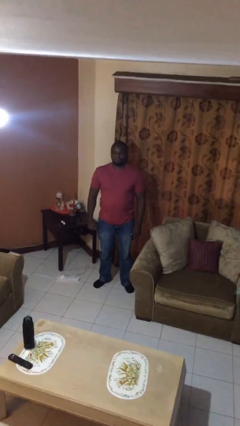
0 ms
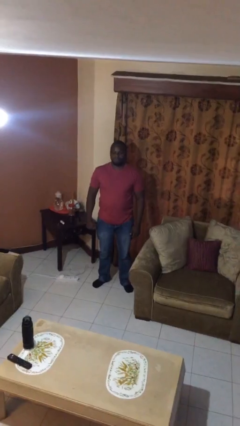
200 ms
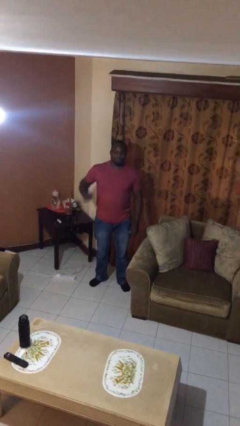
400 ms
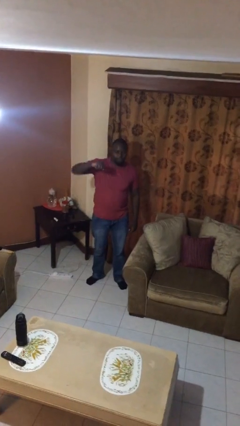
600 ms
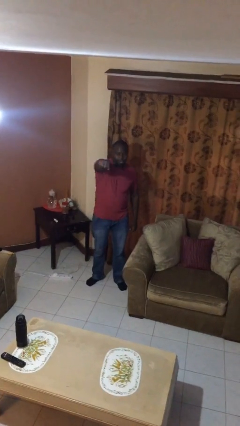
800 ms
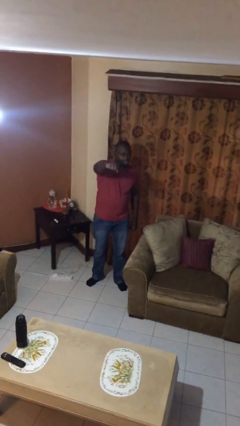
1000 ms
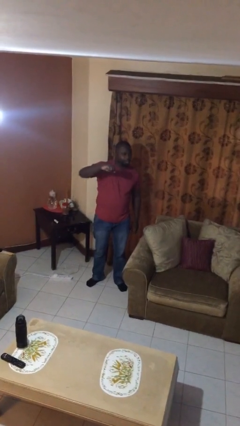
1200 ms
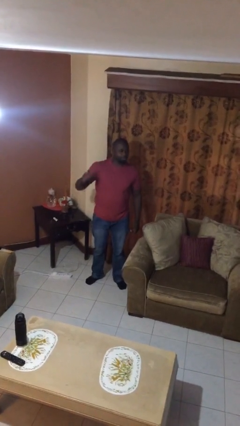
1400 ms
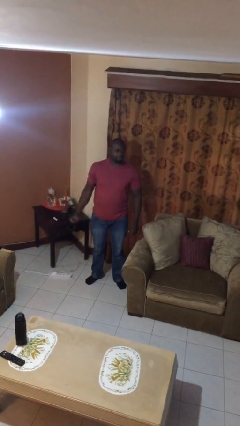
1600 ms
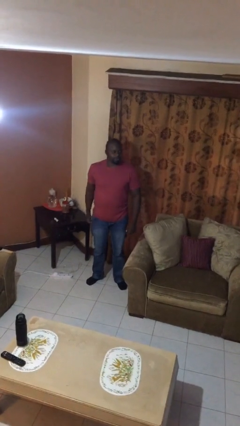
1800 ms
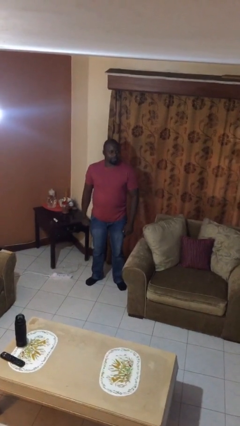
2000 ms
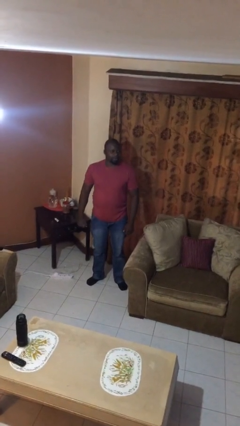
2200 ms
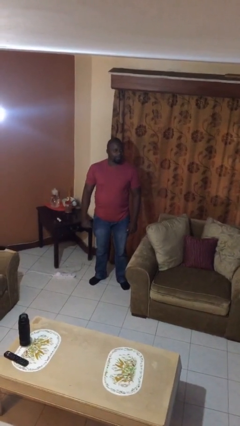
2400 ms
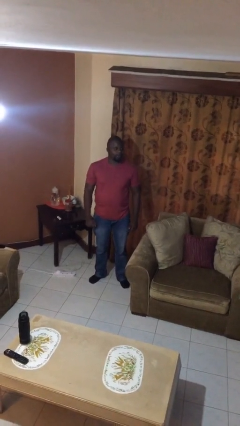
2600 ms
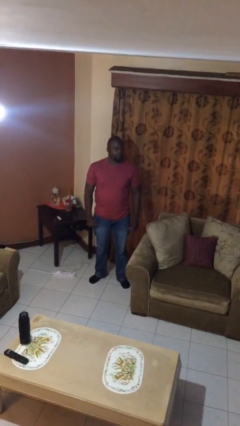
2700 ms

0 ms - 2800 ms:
person punches

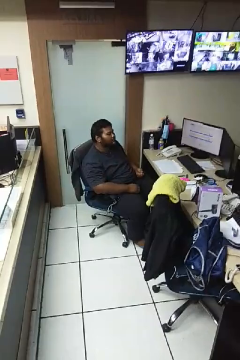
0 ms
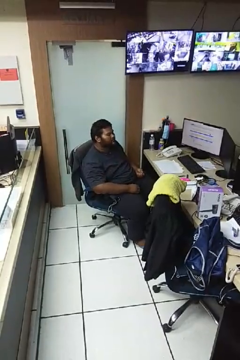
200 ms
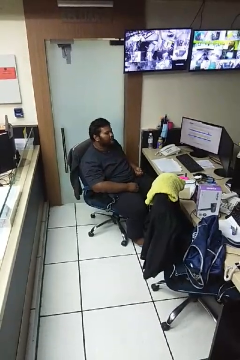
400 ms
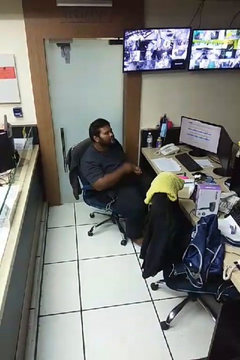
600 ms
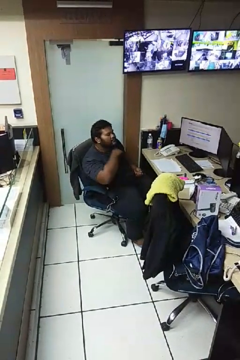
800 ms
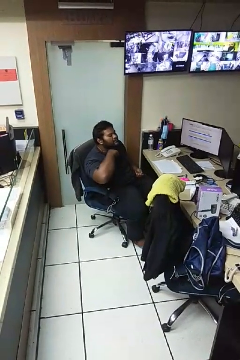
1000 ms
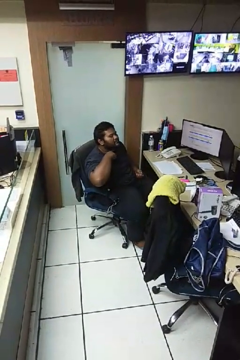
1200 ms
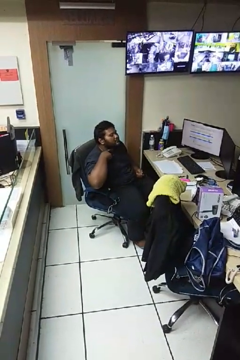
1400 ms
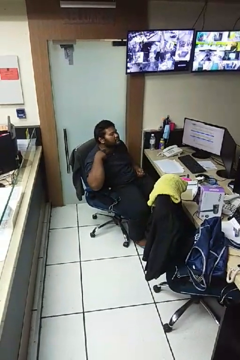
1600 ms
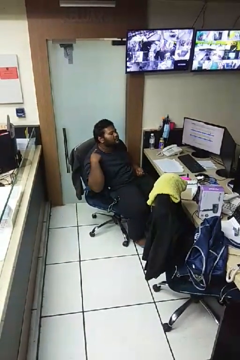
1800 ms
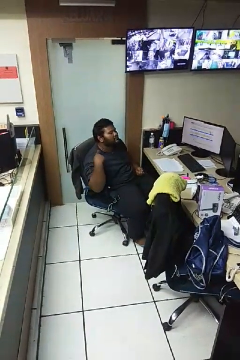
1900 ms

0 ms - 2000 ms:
person gestures cut

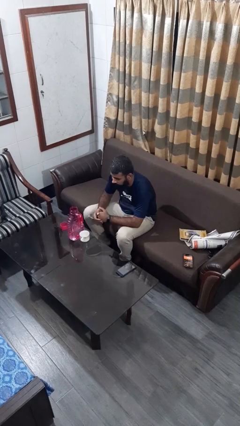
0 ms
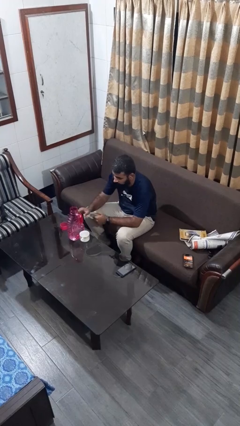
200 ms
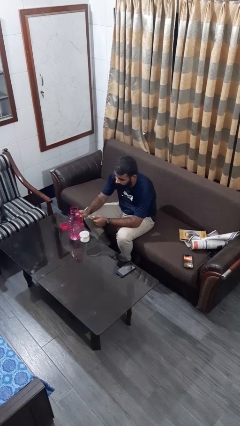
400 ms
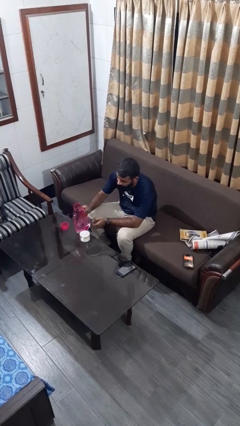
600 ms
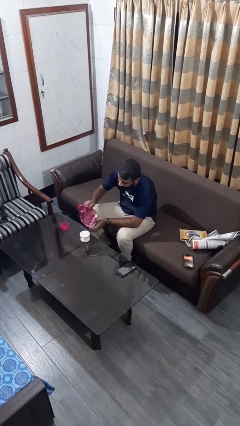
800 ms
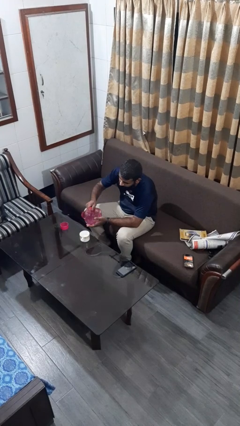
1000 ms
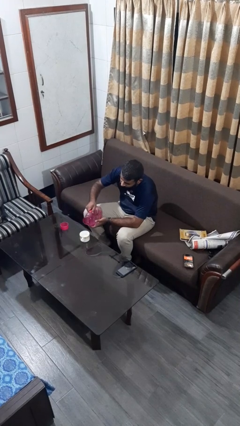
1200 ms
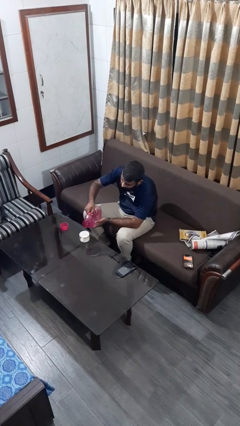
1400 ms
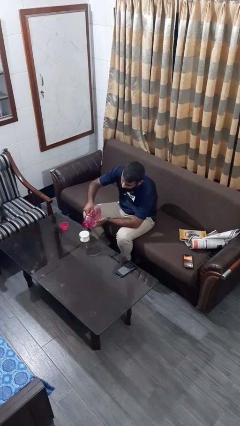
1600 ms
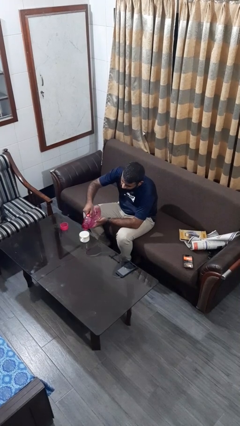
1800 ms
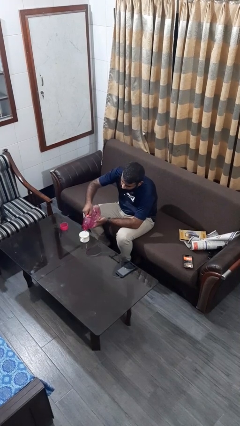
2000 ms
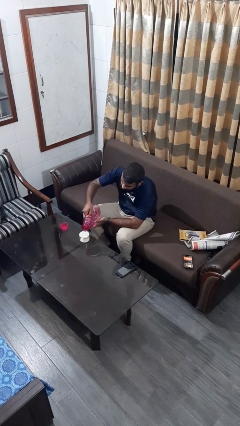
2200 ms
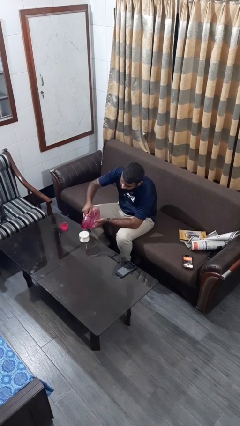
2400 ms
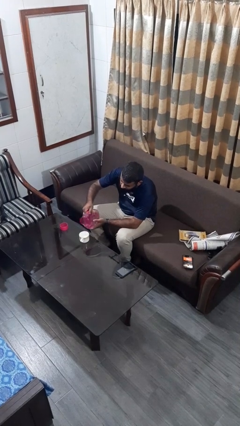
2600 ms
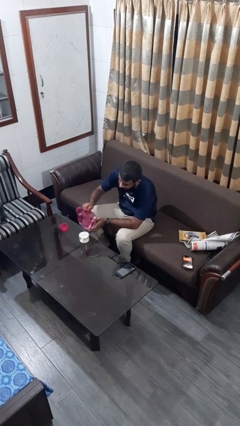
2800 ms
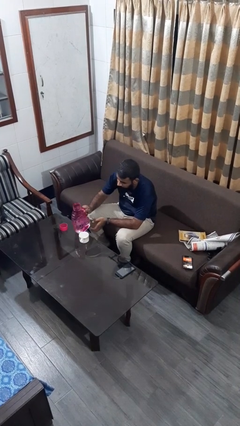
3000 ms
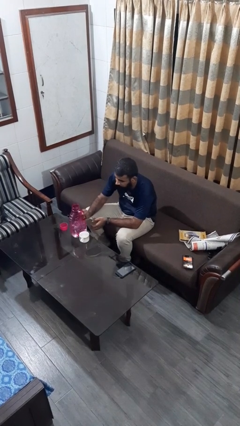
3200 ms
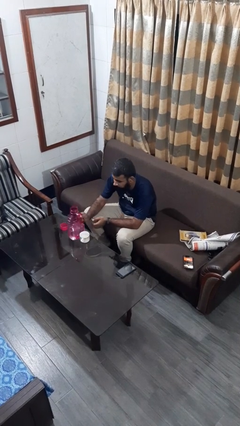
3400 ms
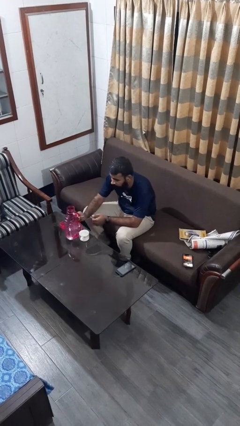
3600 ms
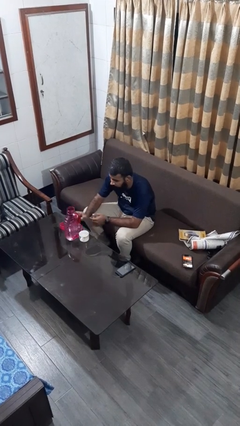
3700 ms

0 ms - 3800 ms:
person pours liquid into cup

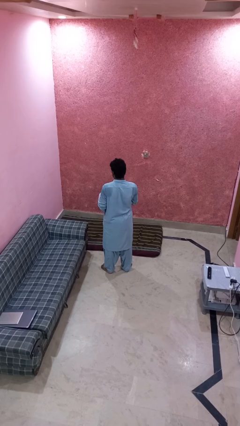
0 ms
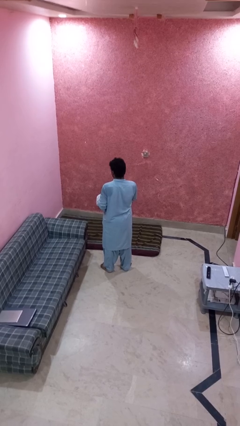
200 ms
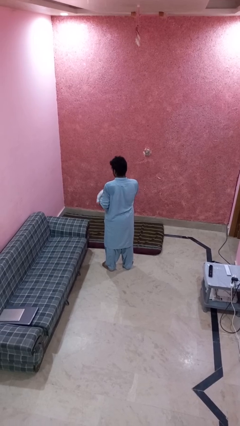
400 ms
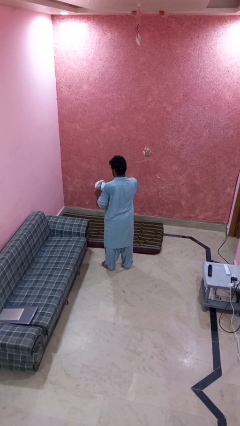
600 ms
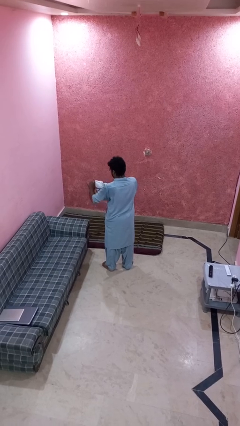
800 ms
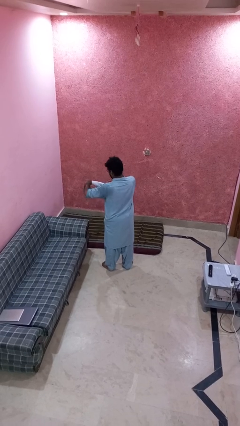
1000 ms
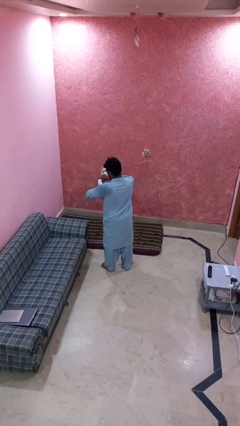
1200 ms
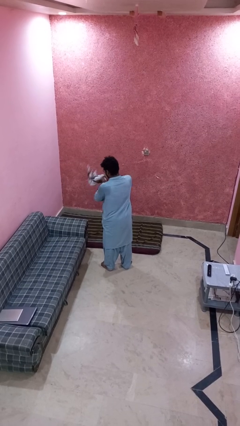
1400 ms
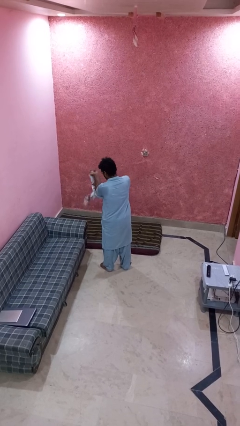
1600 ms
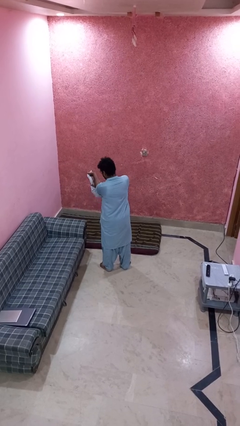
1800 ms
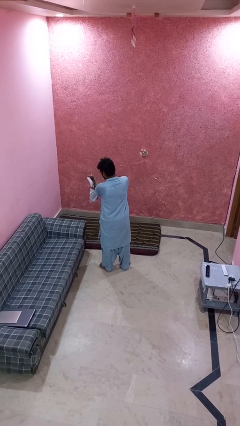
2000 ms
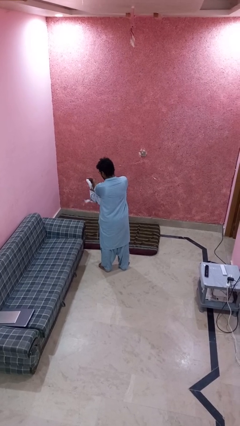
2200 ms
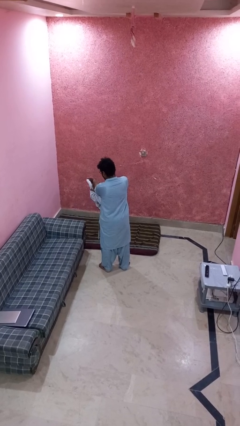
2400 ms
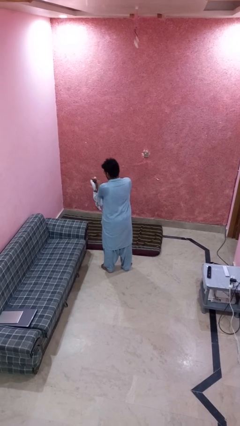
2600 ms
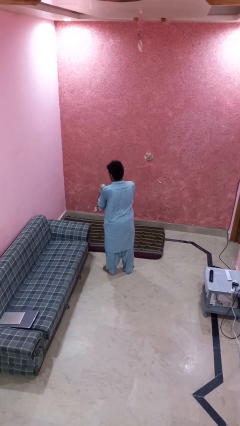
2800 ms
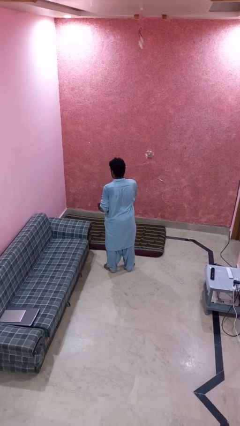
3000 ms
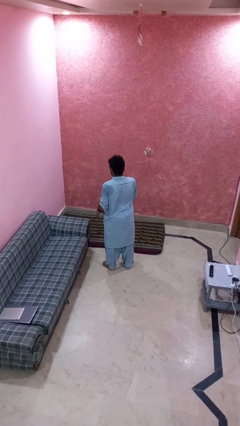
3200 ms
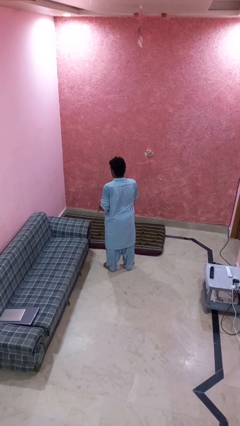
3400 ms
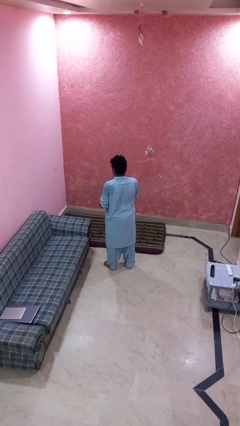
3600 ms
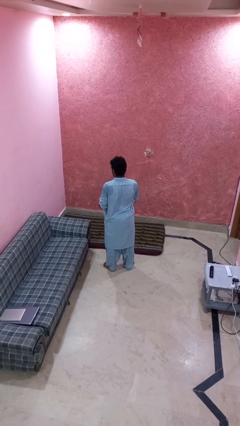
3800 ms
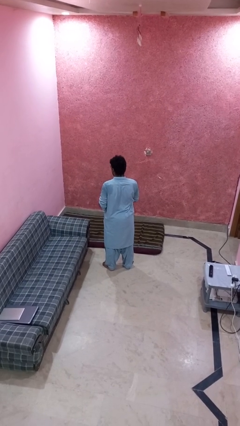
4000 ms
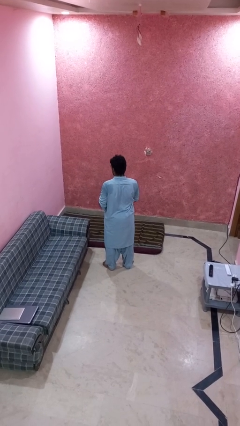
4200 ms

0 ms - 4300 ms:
person squeezes object

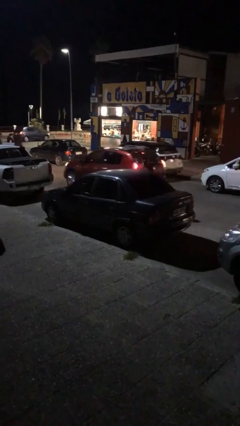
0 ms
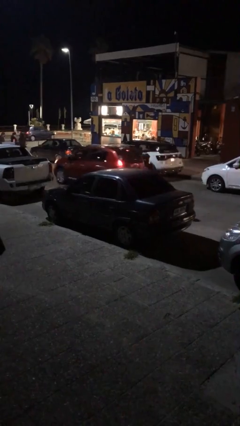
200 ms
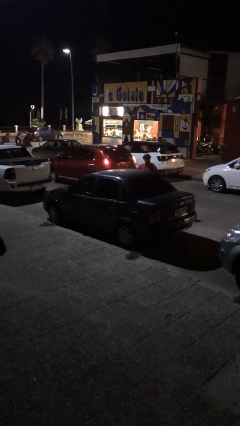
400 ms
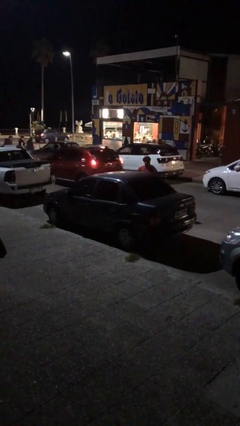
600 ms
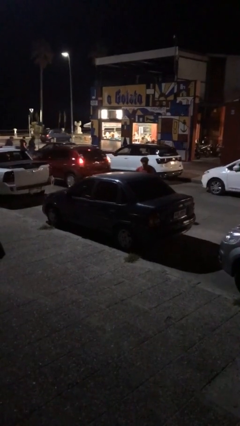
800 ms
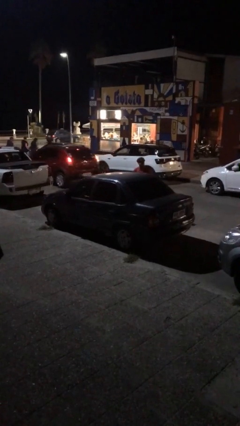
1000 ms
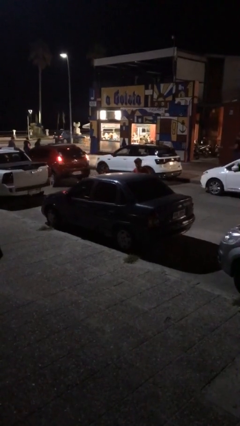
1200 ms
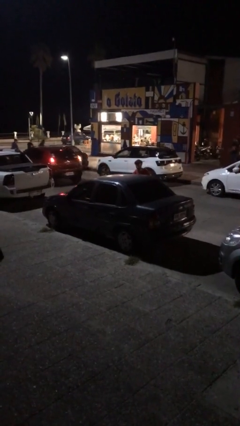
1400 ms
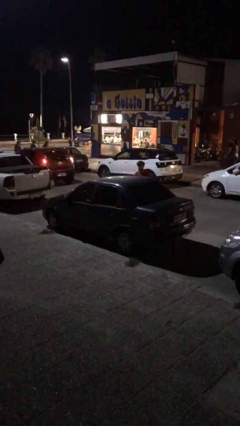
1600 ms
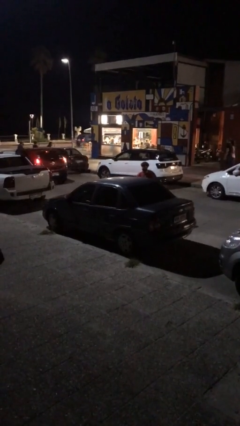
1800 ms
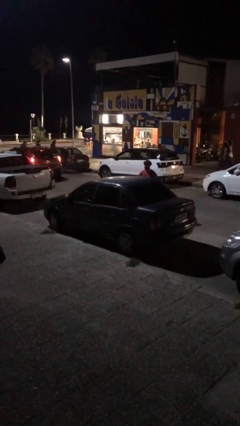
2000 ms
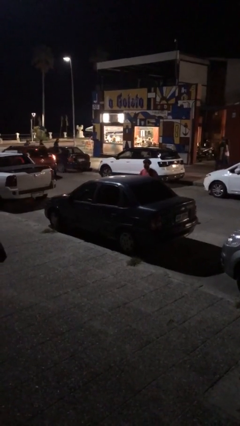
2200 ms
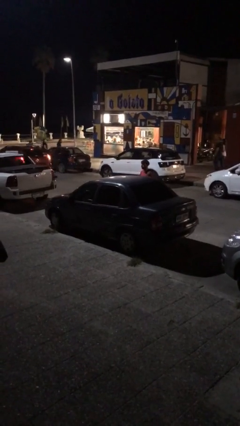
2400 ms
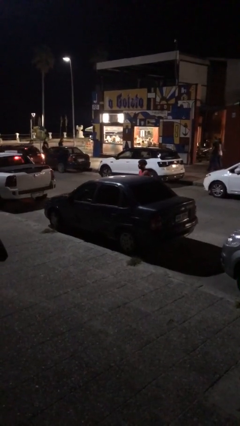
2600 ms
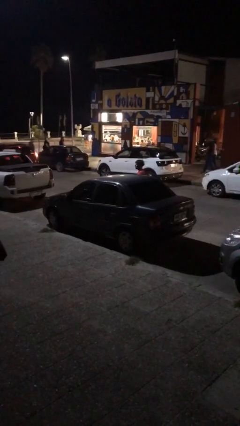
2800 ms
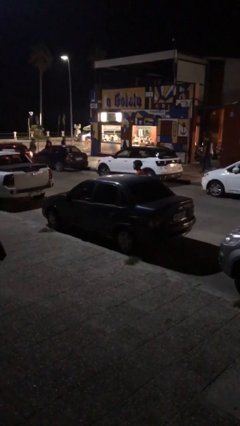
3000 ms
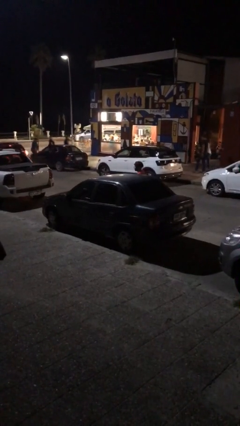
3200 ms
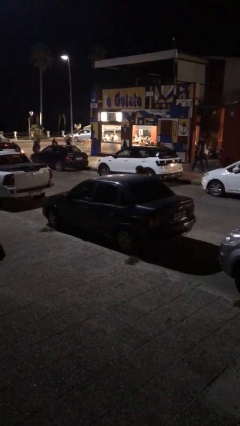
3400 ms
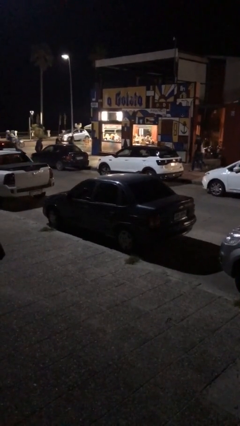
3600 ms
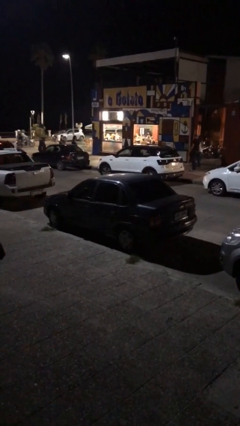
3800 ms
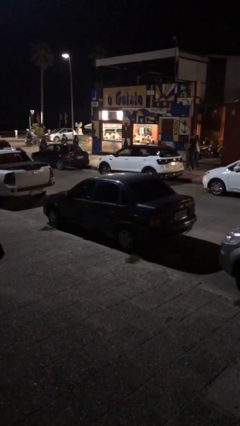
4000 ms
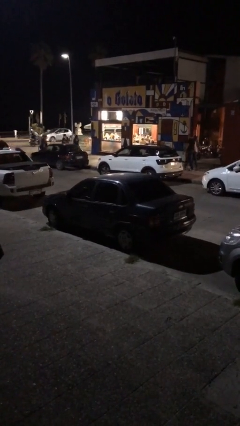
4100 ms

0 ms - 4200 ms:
car picks up person

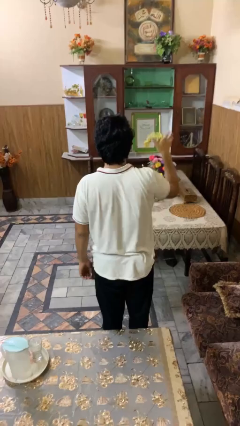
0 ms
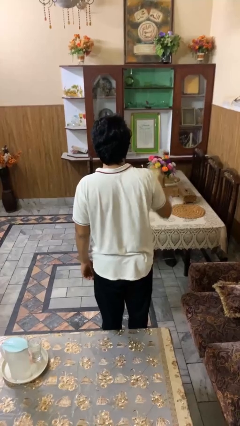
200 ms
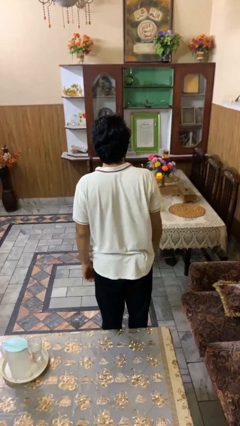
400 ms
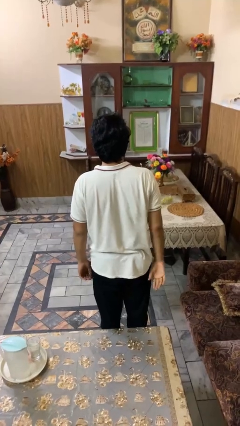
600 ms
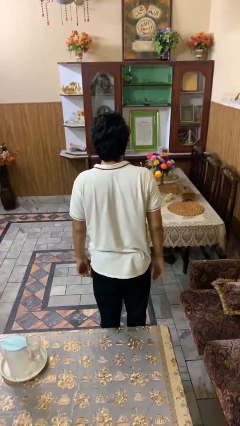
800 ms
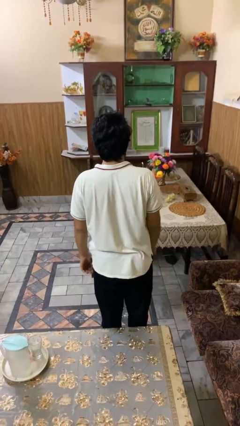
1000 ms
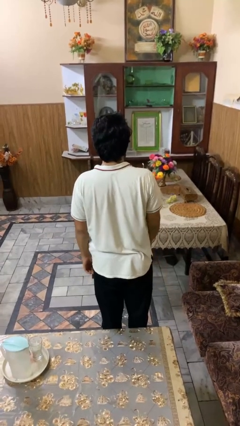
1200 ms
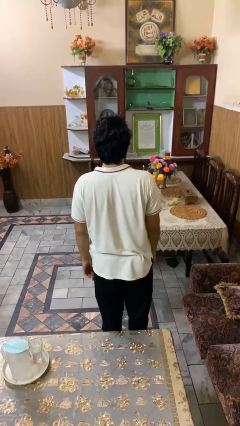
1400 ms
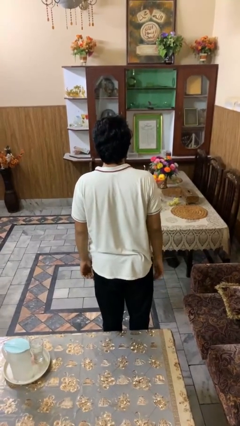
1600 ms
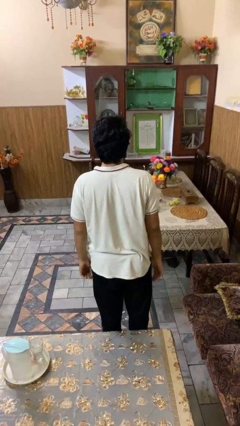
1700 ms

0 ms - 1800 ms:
person throws object on table
